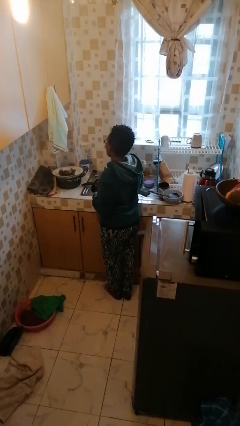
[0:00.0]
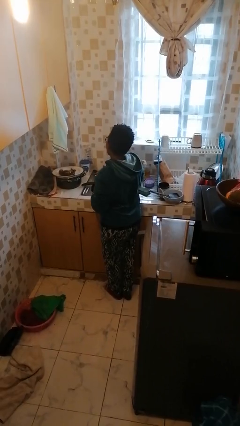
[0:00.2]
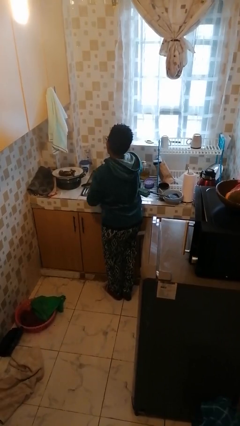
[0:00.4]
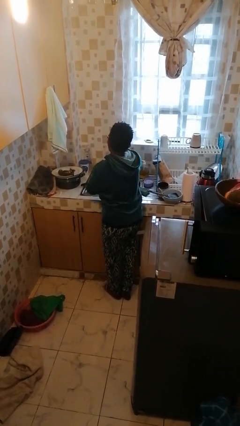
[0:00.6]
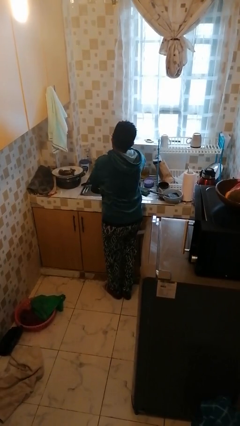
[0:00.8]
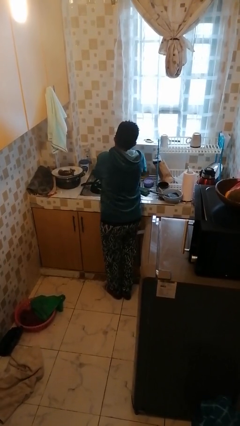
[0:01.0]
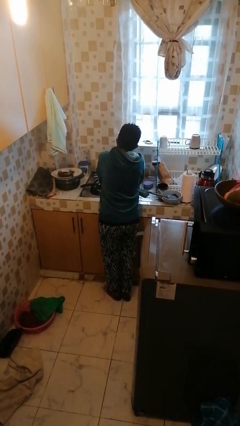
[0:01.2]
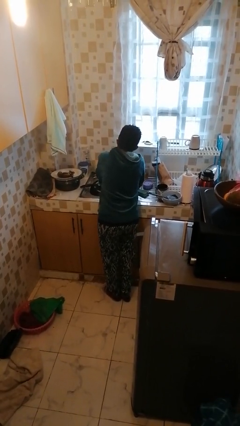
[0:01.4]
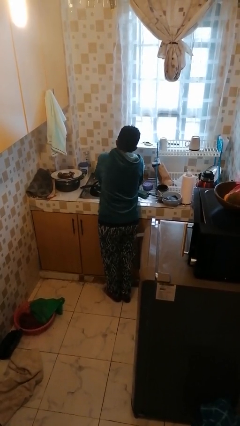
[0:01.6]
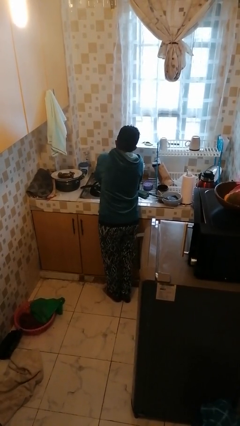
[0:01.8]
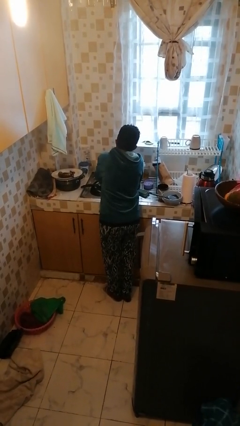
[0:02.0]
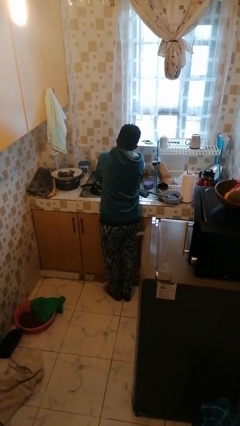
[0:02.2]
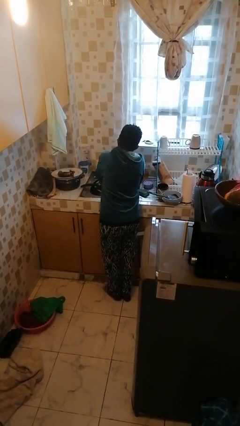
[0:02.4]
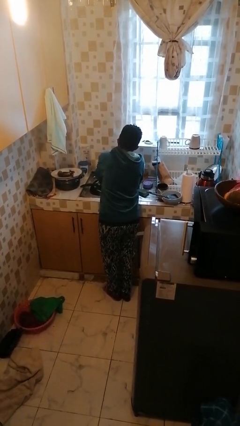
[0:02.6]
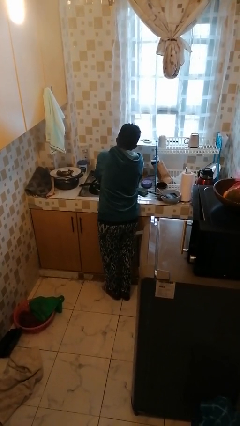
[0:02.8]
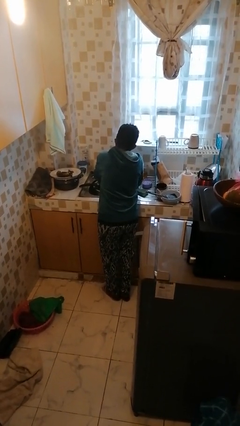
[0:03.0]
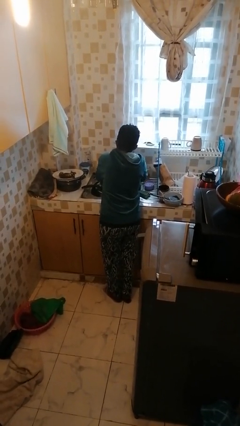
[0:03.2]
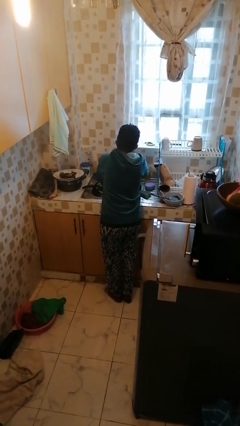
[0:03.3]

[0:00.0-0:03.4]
person washes hands

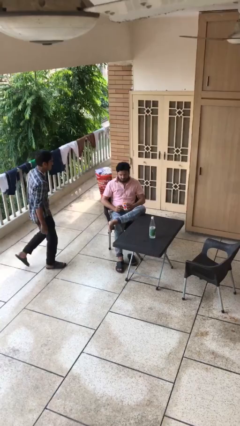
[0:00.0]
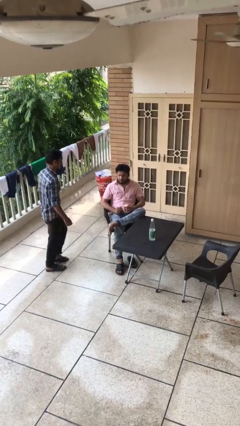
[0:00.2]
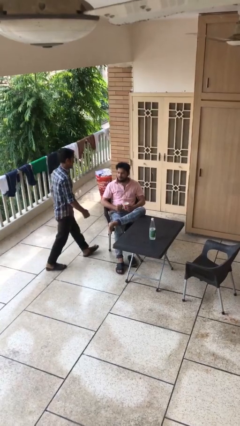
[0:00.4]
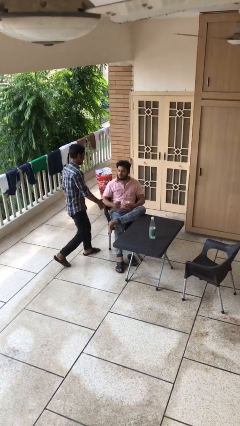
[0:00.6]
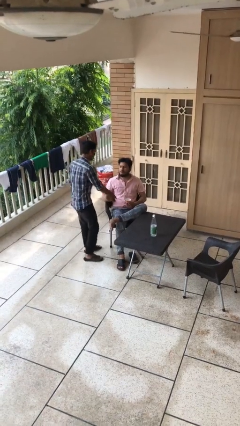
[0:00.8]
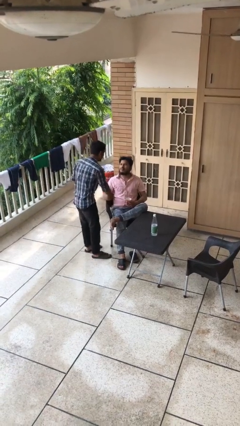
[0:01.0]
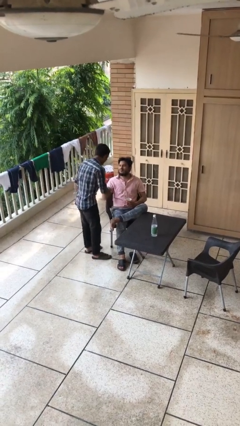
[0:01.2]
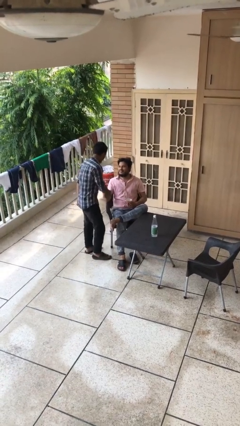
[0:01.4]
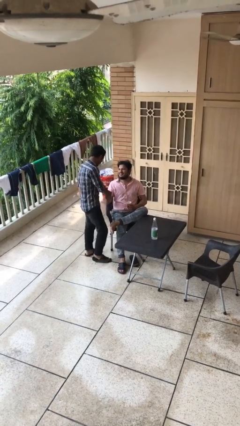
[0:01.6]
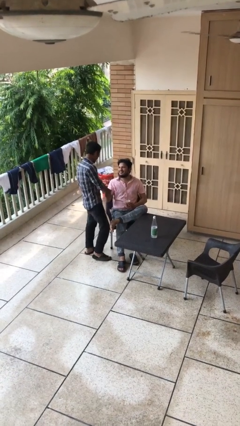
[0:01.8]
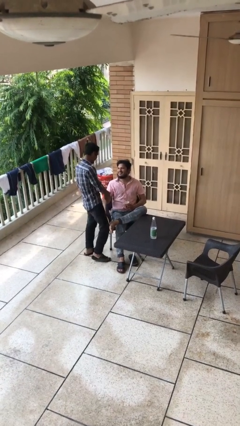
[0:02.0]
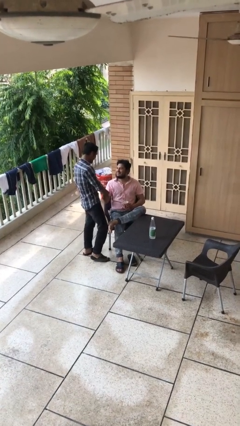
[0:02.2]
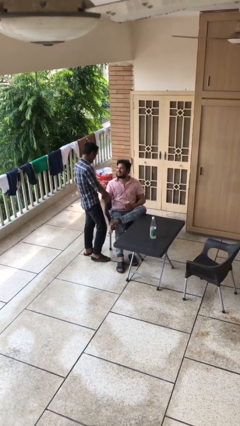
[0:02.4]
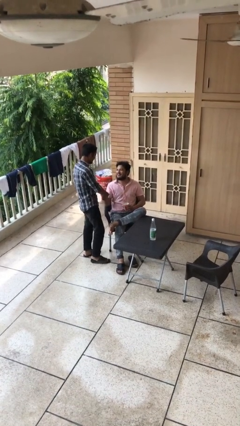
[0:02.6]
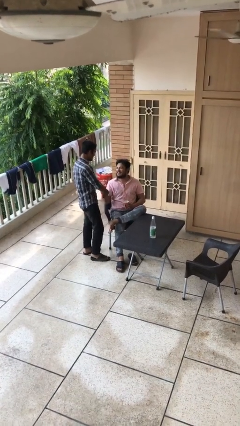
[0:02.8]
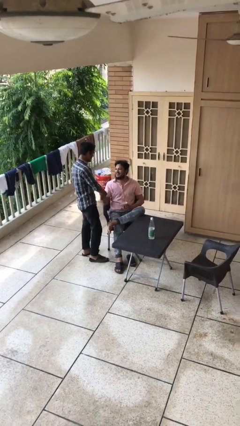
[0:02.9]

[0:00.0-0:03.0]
person shakes hand

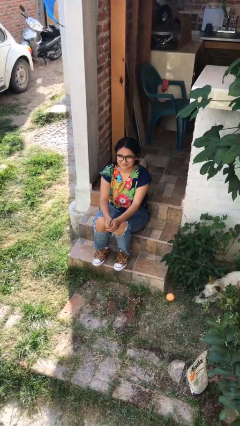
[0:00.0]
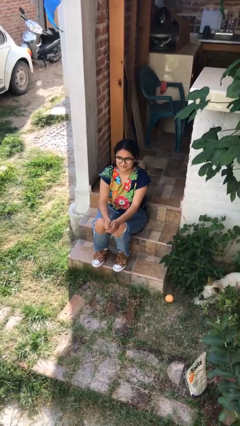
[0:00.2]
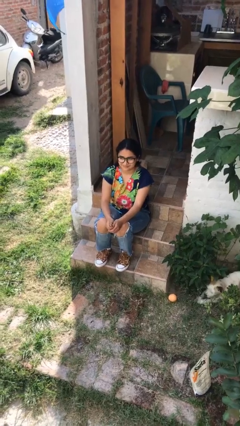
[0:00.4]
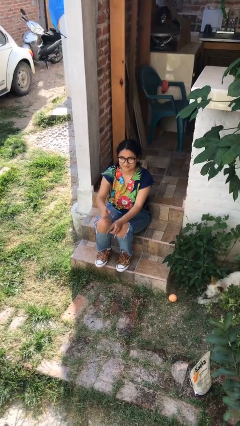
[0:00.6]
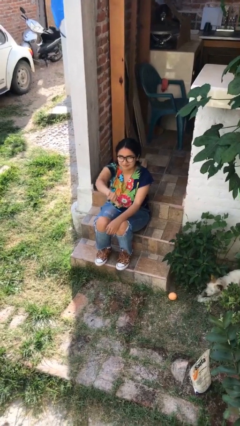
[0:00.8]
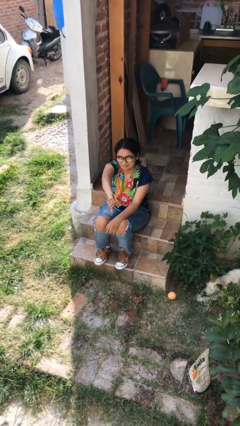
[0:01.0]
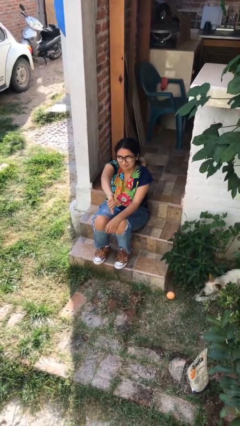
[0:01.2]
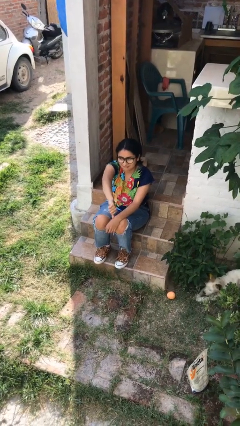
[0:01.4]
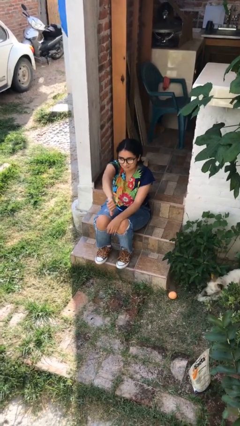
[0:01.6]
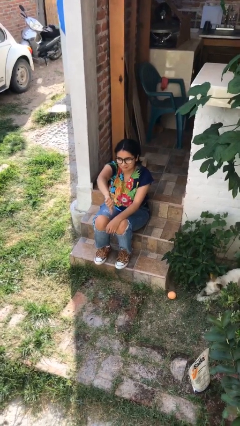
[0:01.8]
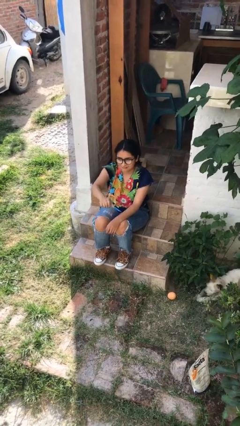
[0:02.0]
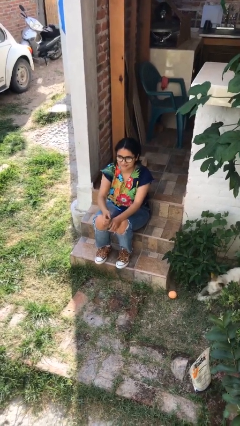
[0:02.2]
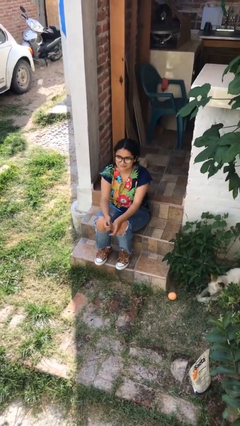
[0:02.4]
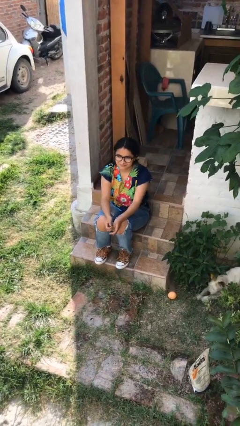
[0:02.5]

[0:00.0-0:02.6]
person gestures thumbs down

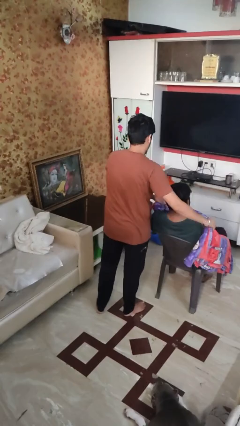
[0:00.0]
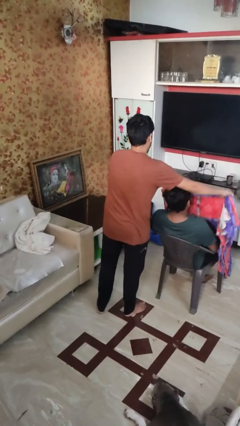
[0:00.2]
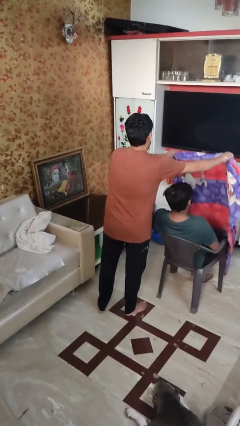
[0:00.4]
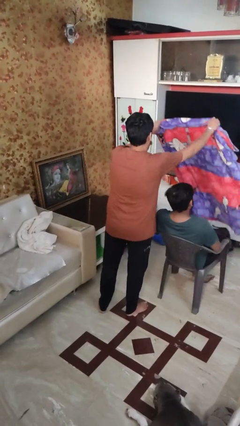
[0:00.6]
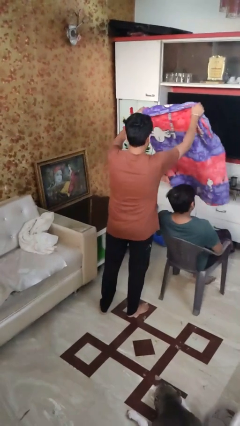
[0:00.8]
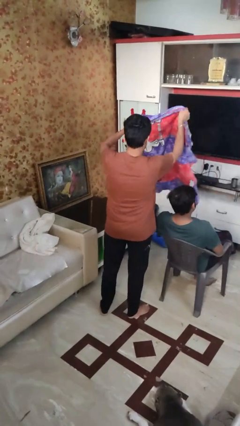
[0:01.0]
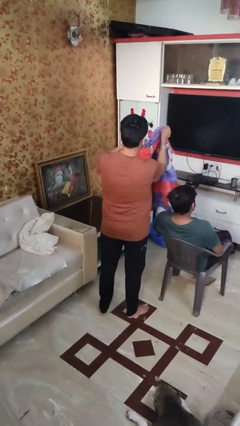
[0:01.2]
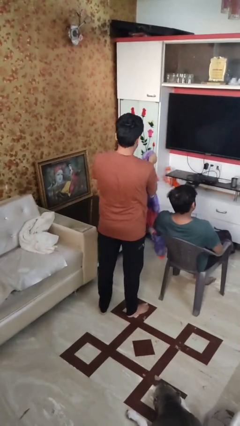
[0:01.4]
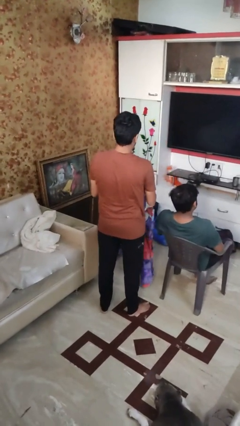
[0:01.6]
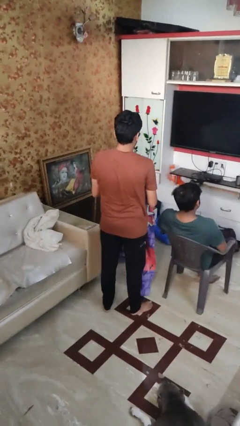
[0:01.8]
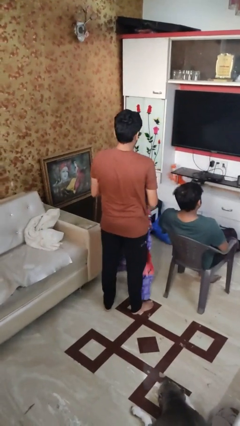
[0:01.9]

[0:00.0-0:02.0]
person uncovers friend with blanket

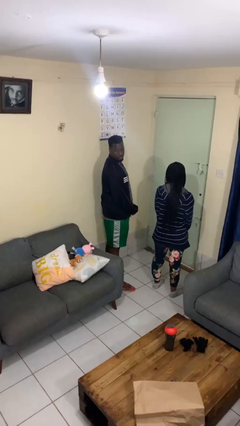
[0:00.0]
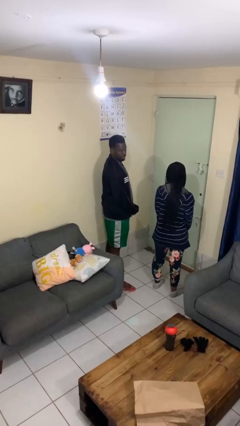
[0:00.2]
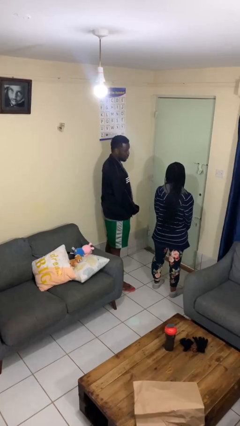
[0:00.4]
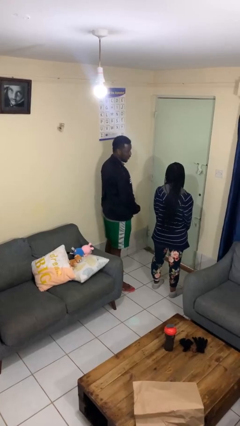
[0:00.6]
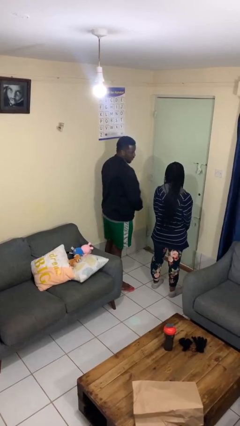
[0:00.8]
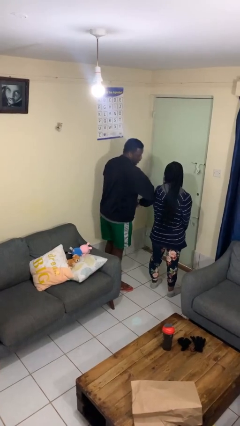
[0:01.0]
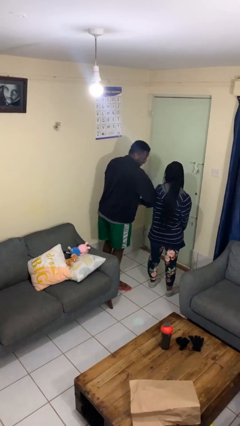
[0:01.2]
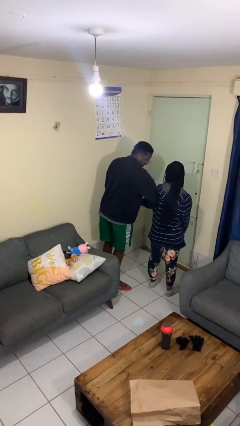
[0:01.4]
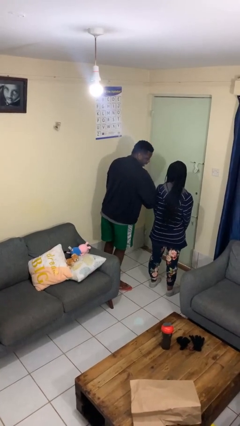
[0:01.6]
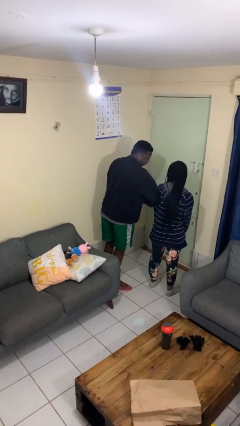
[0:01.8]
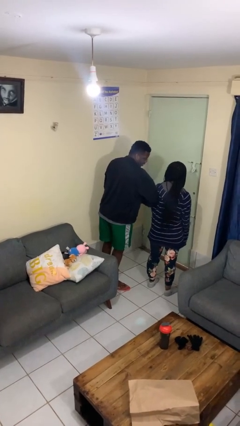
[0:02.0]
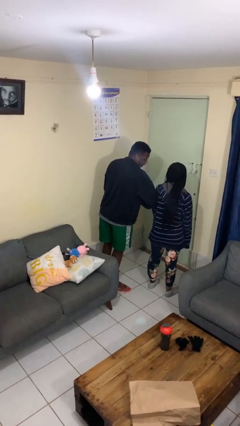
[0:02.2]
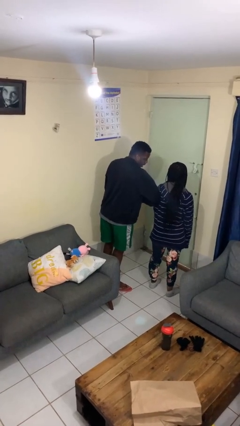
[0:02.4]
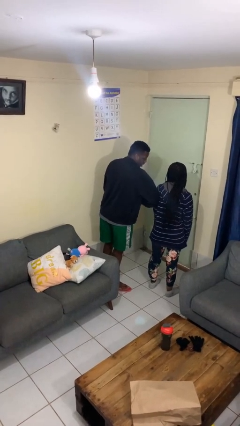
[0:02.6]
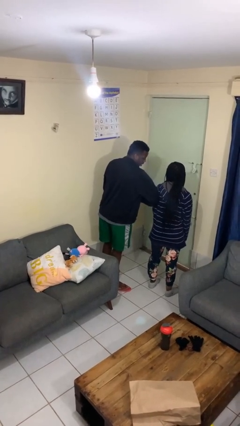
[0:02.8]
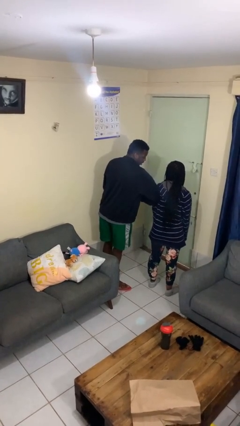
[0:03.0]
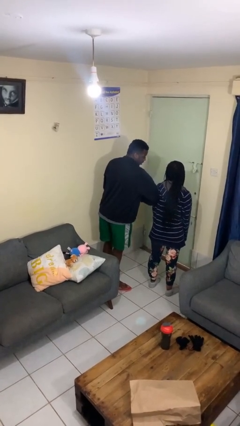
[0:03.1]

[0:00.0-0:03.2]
person nudges person with elbow

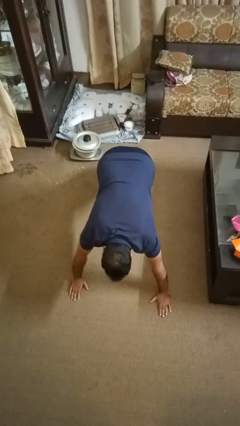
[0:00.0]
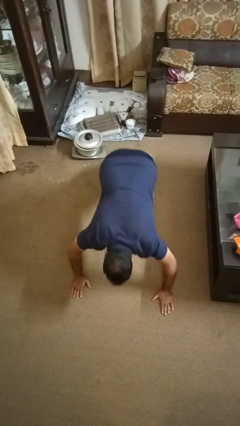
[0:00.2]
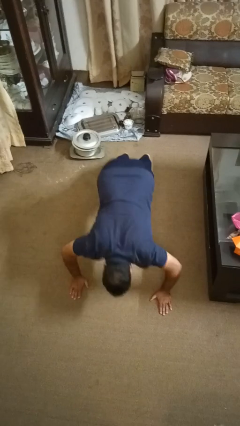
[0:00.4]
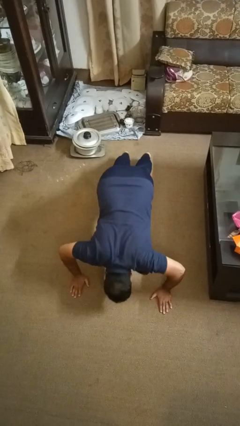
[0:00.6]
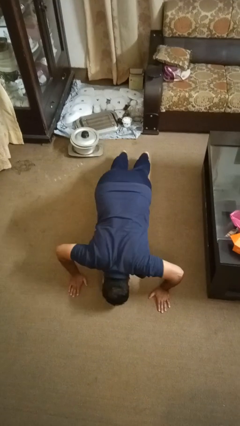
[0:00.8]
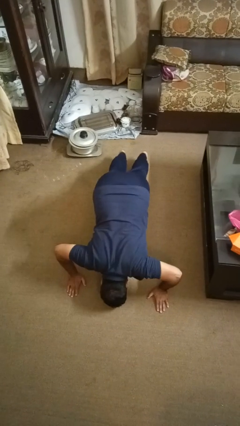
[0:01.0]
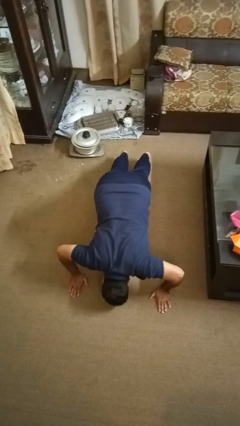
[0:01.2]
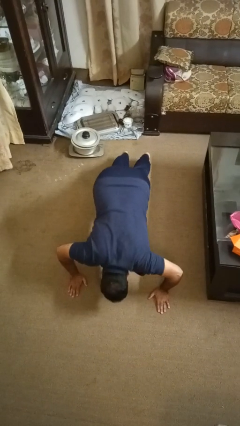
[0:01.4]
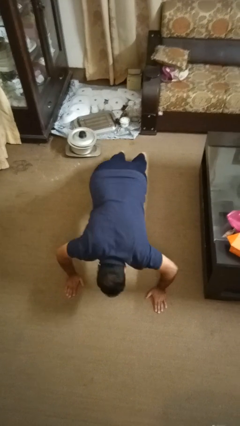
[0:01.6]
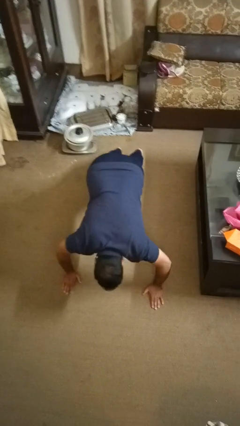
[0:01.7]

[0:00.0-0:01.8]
person exercises with pushup

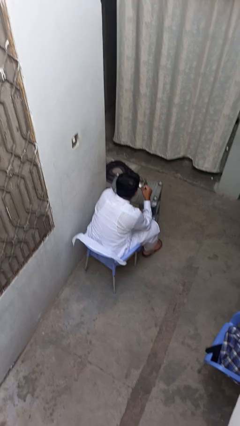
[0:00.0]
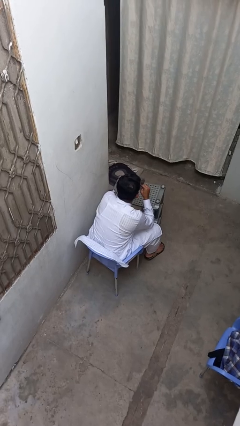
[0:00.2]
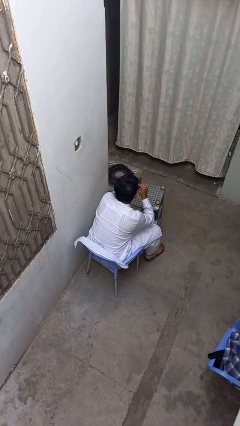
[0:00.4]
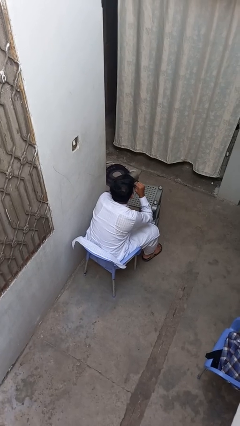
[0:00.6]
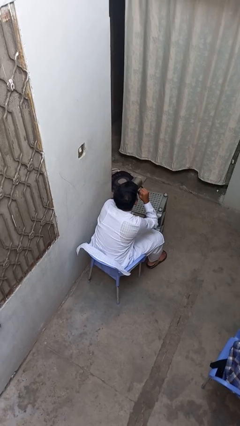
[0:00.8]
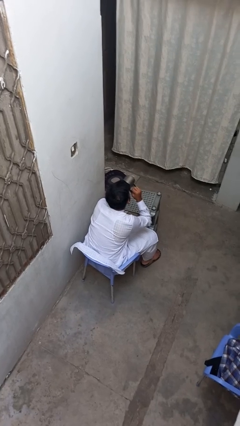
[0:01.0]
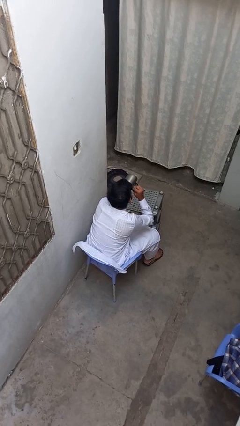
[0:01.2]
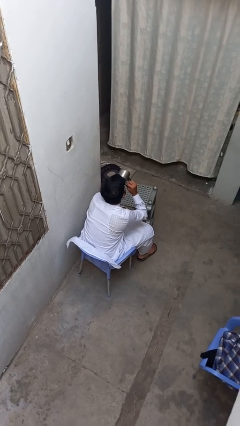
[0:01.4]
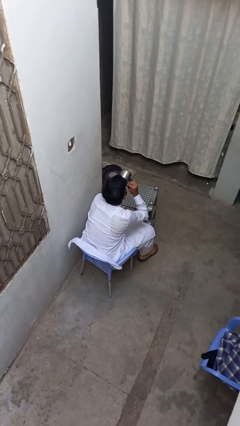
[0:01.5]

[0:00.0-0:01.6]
person drinks from mug
